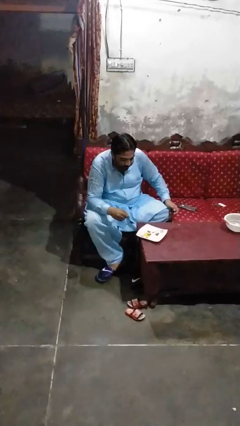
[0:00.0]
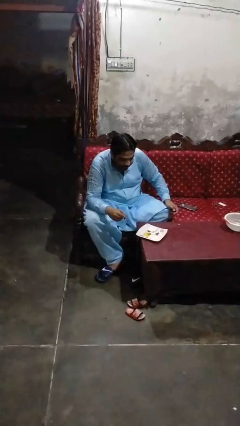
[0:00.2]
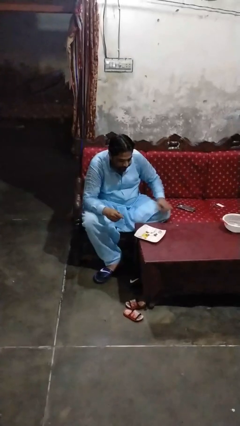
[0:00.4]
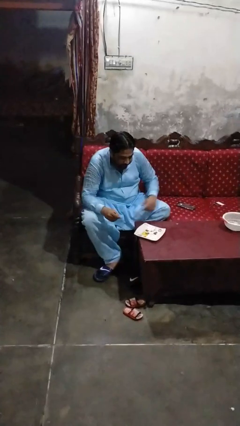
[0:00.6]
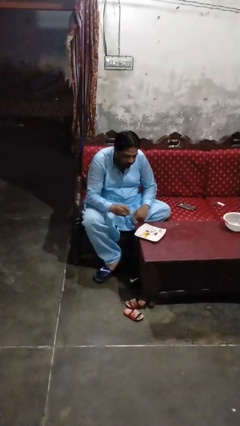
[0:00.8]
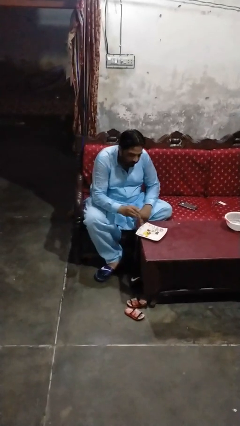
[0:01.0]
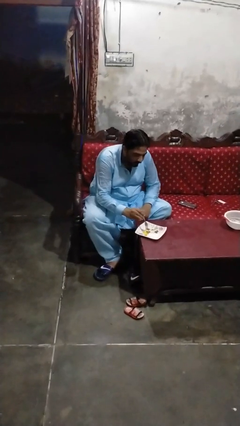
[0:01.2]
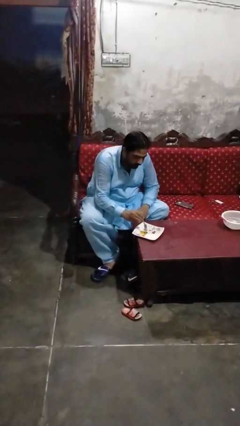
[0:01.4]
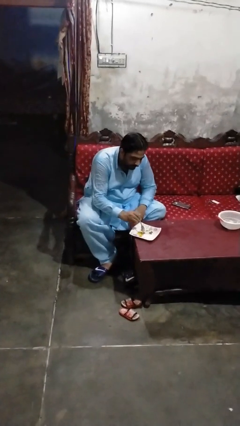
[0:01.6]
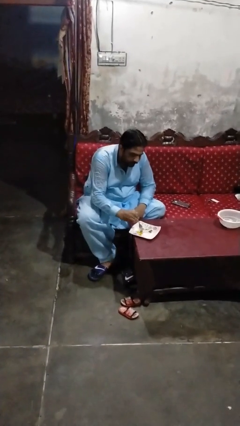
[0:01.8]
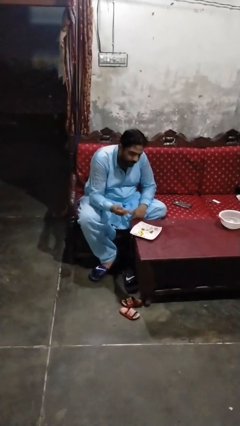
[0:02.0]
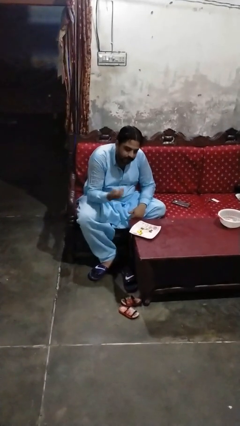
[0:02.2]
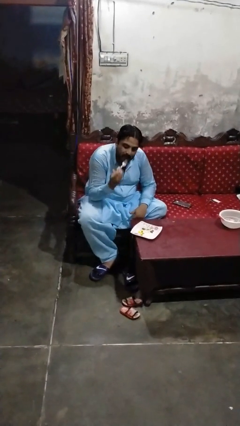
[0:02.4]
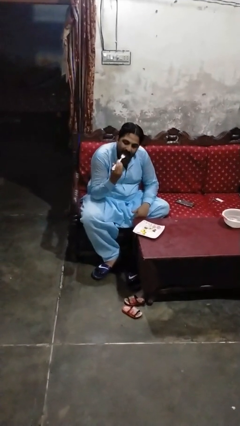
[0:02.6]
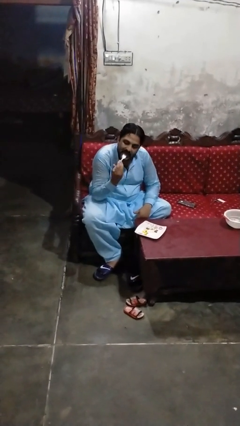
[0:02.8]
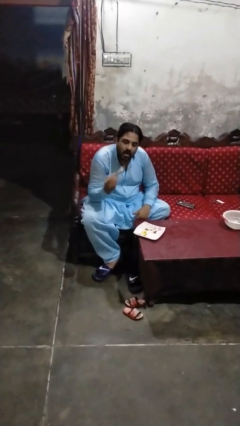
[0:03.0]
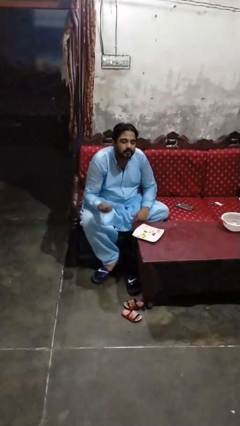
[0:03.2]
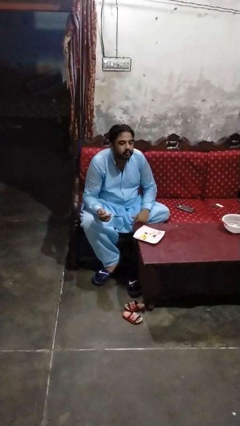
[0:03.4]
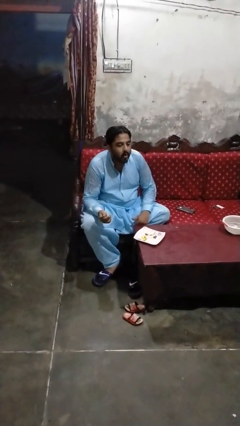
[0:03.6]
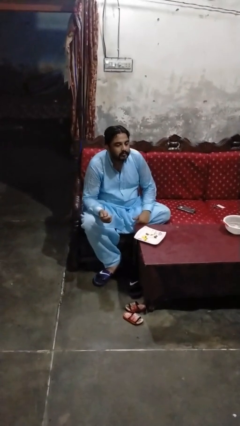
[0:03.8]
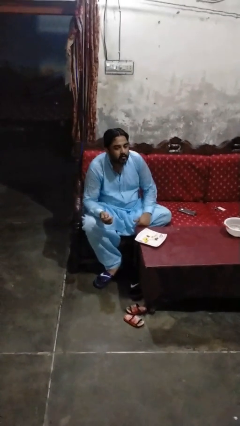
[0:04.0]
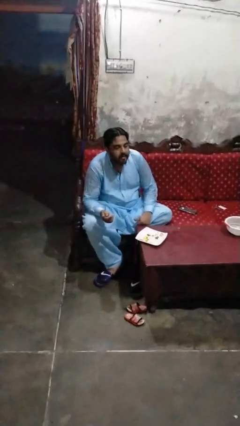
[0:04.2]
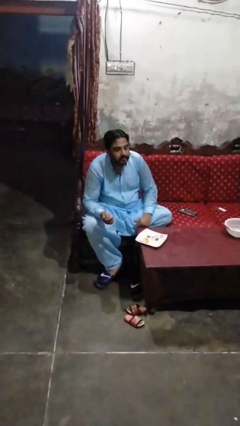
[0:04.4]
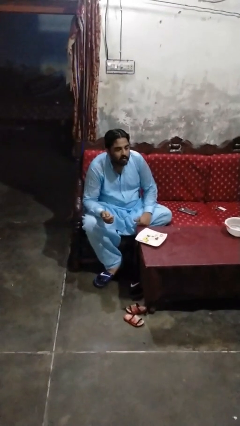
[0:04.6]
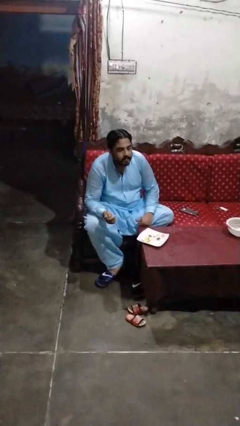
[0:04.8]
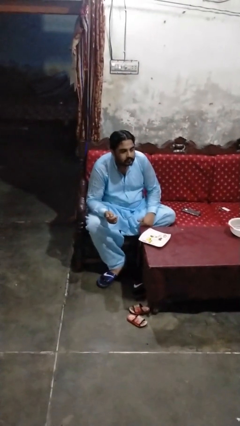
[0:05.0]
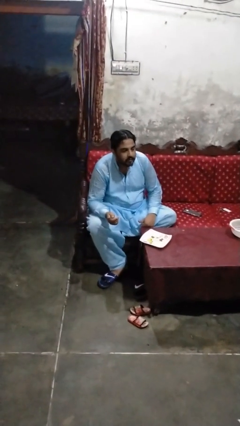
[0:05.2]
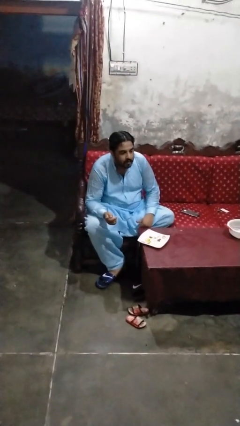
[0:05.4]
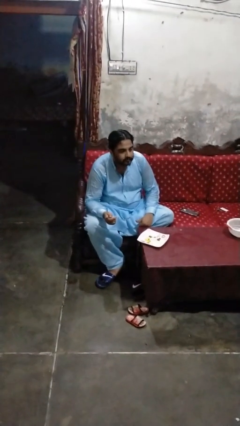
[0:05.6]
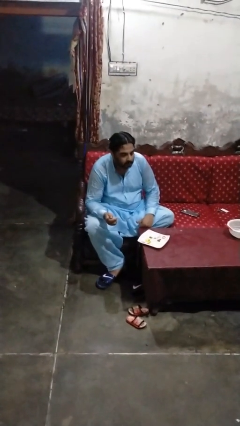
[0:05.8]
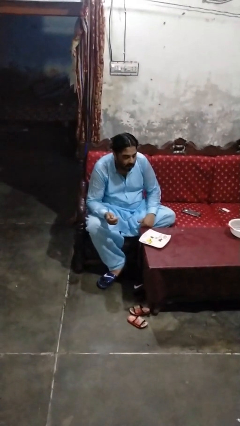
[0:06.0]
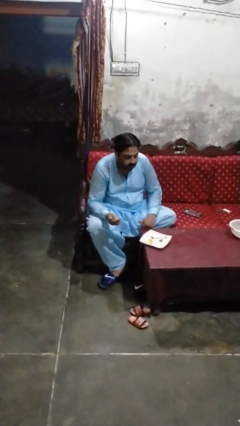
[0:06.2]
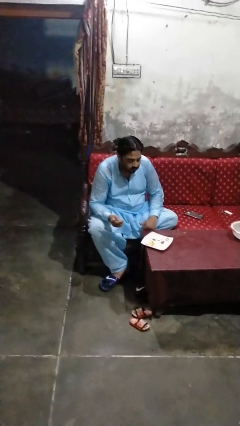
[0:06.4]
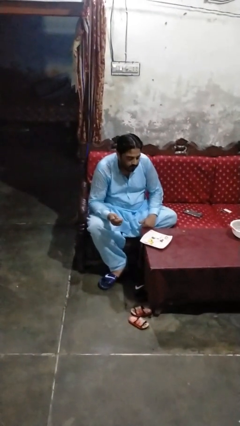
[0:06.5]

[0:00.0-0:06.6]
person eats with utensil

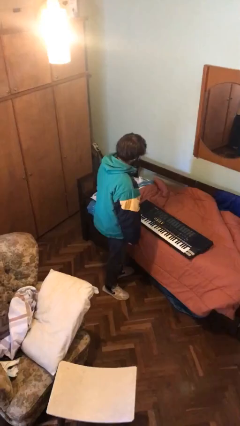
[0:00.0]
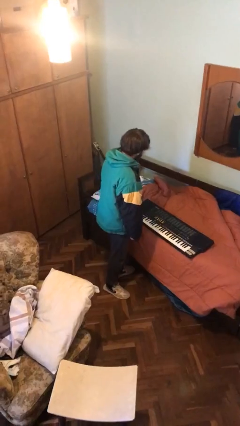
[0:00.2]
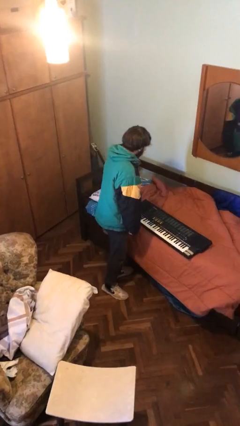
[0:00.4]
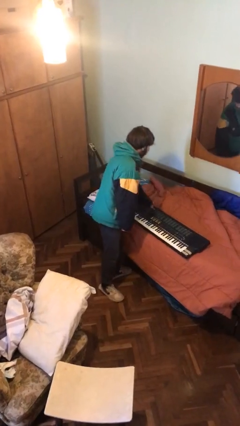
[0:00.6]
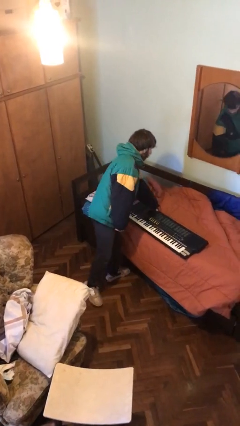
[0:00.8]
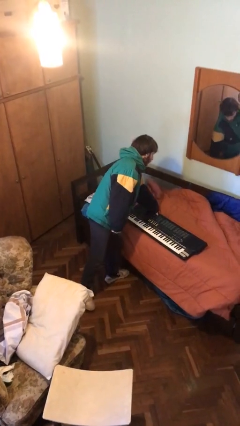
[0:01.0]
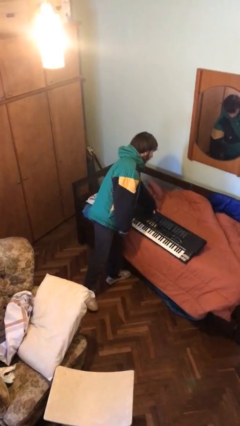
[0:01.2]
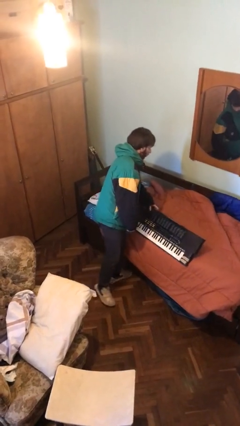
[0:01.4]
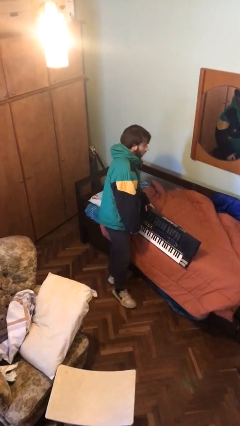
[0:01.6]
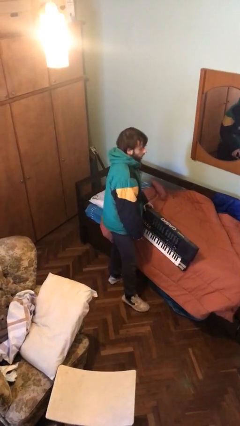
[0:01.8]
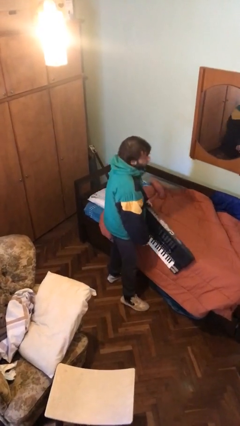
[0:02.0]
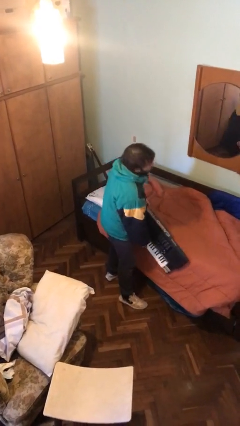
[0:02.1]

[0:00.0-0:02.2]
person picks up object from bed

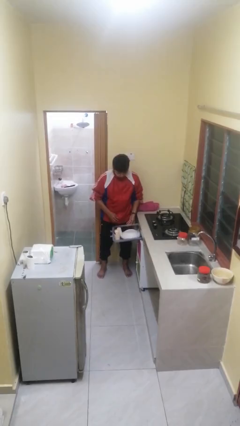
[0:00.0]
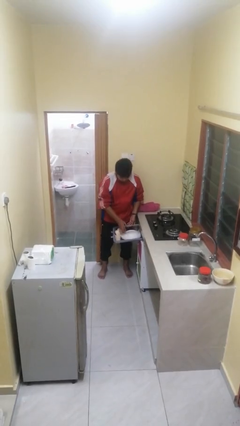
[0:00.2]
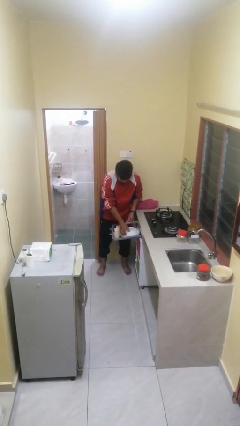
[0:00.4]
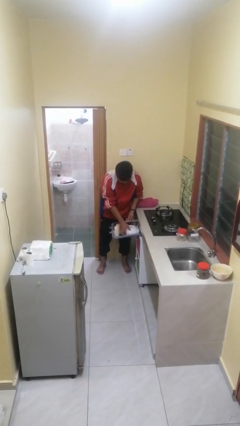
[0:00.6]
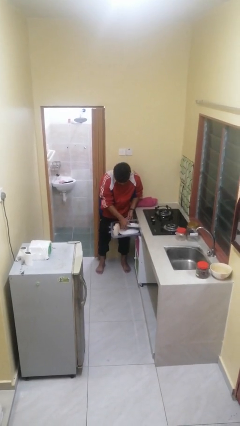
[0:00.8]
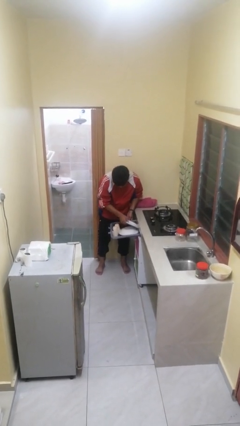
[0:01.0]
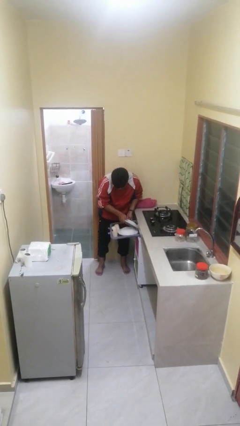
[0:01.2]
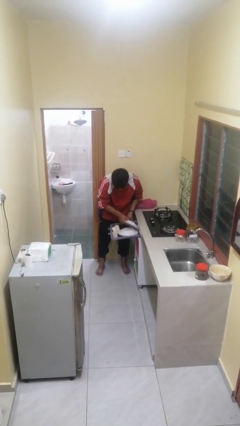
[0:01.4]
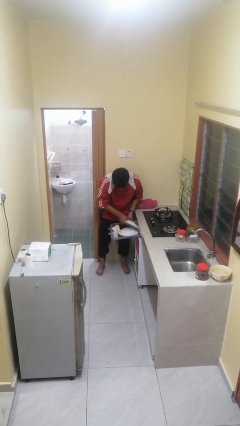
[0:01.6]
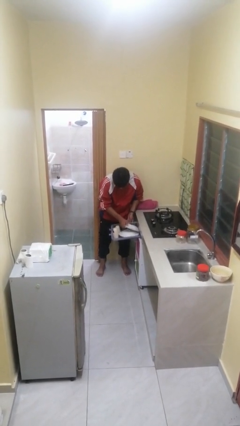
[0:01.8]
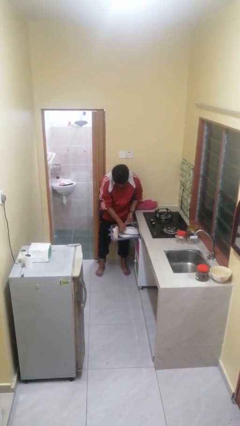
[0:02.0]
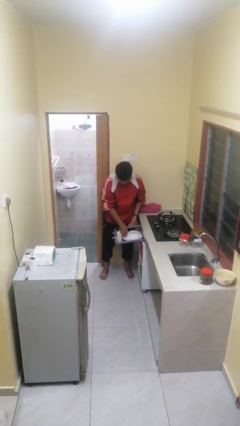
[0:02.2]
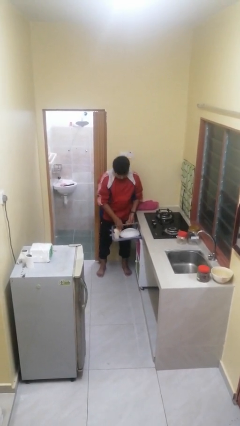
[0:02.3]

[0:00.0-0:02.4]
person searches in kitchen drawer

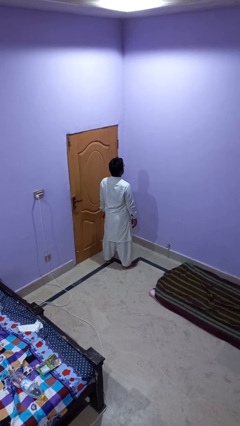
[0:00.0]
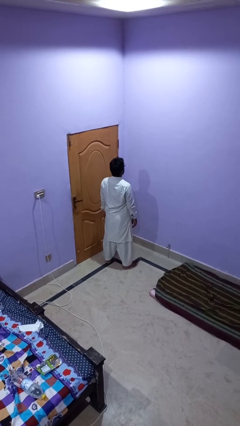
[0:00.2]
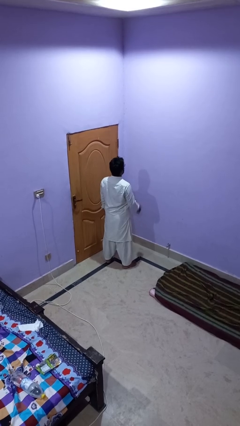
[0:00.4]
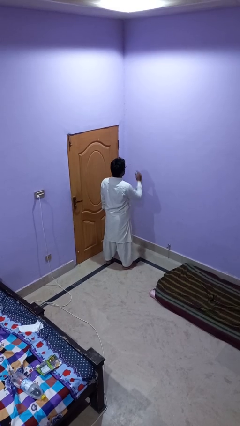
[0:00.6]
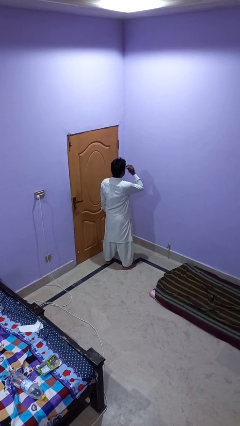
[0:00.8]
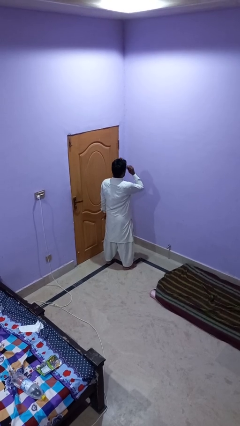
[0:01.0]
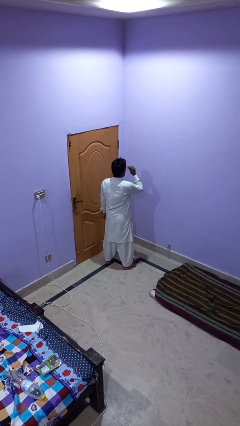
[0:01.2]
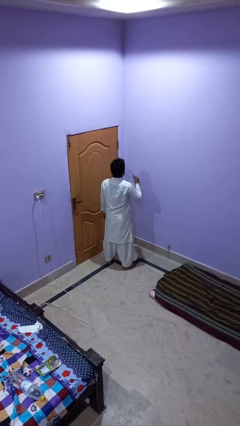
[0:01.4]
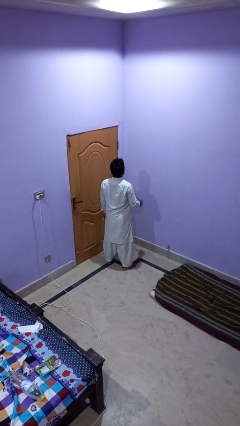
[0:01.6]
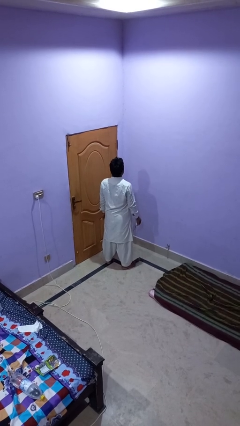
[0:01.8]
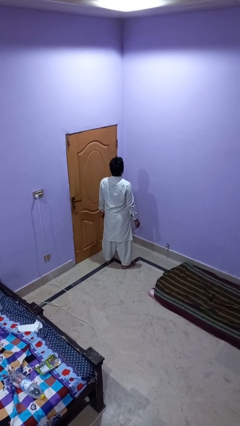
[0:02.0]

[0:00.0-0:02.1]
person takes off glasses

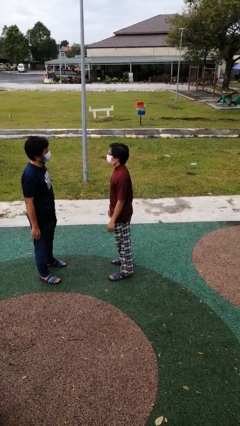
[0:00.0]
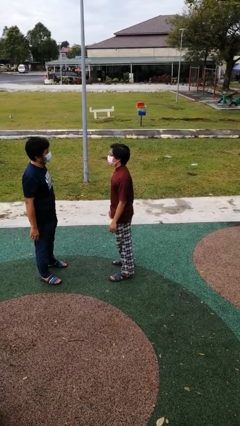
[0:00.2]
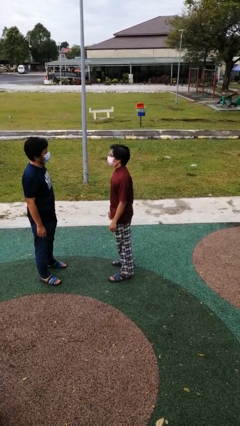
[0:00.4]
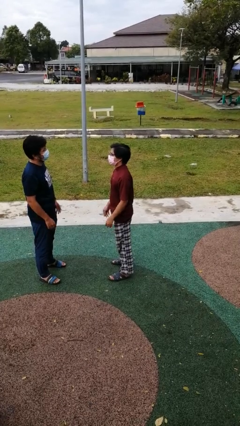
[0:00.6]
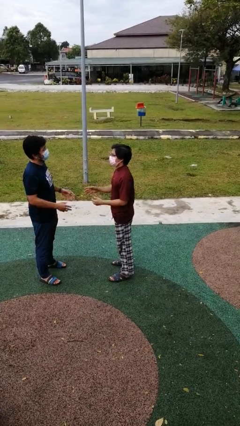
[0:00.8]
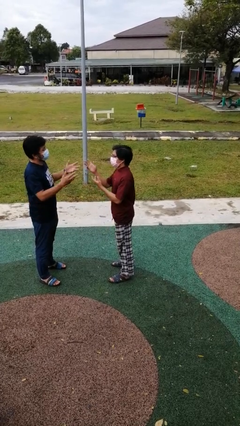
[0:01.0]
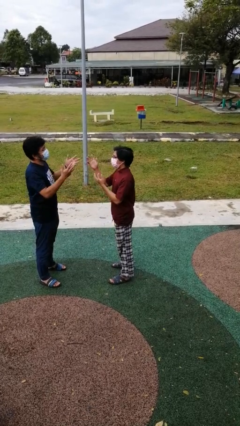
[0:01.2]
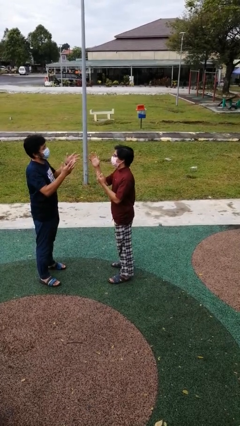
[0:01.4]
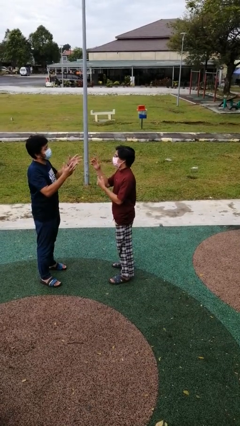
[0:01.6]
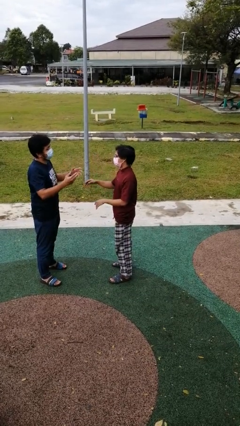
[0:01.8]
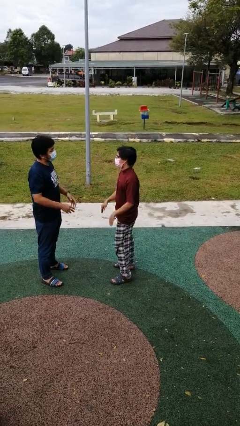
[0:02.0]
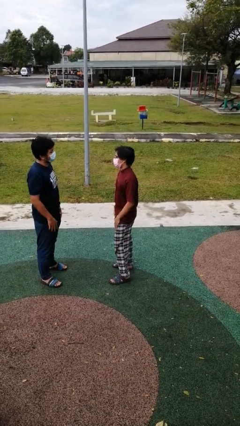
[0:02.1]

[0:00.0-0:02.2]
person talks to person

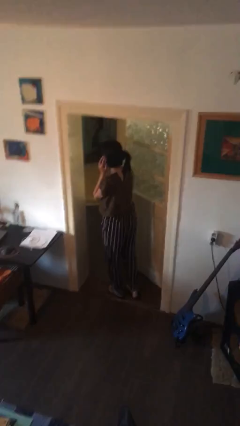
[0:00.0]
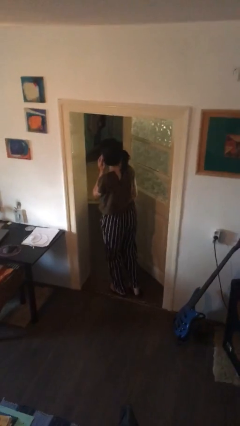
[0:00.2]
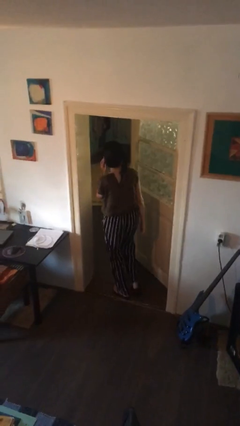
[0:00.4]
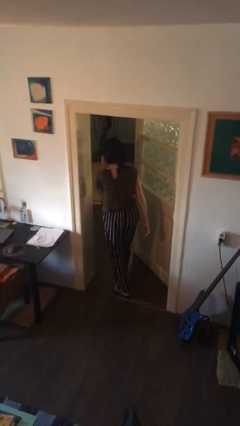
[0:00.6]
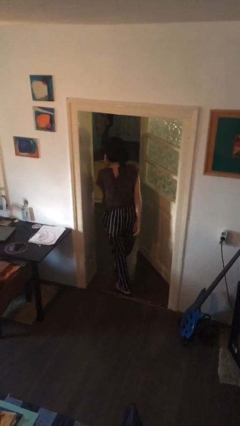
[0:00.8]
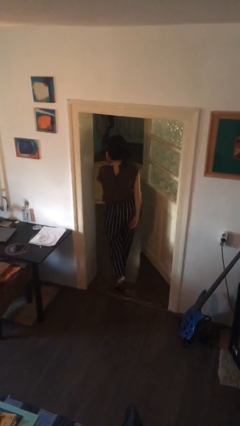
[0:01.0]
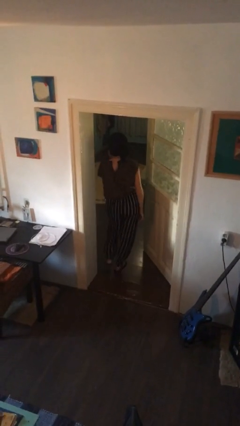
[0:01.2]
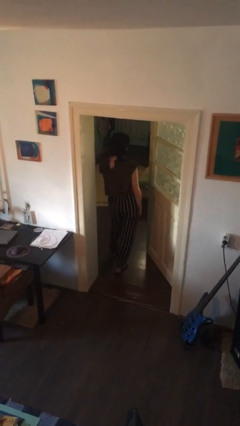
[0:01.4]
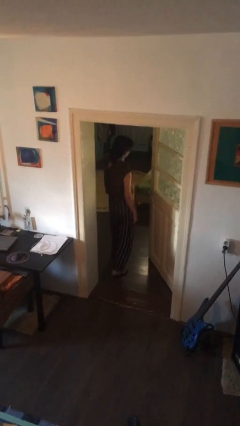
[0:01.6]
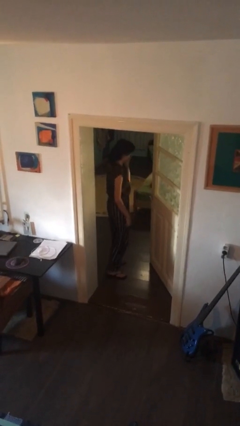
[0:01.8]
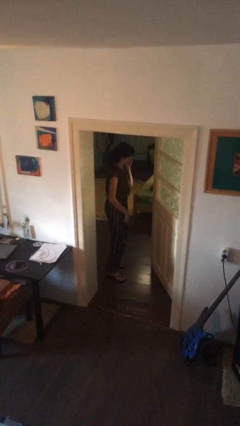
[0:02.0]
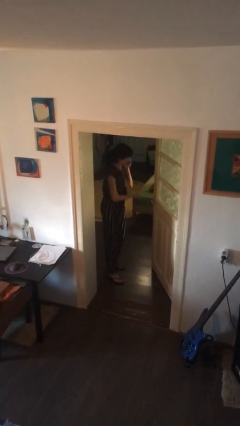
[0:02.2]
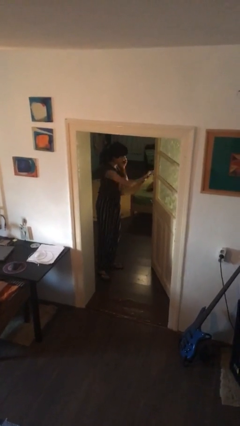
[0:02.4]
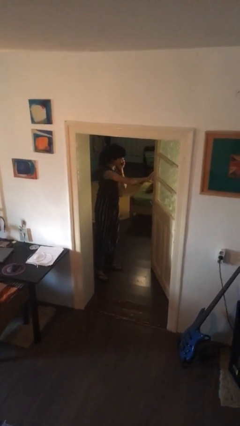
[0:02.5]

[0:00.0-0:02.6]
person exits scene through structure
